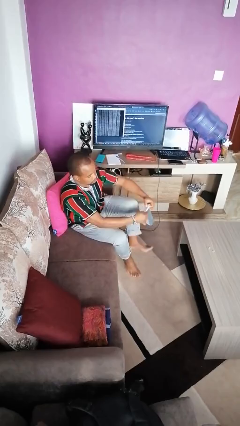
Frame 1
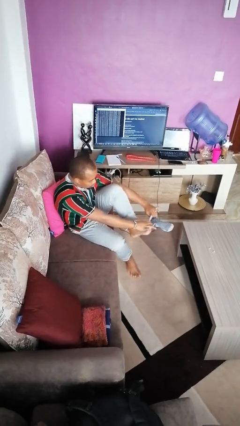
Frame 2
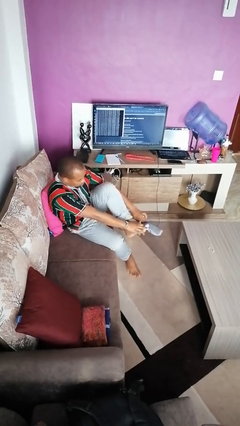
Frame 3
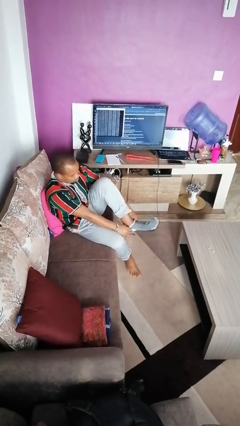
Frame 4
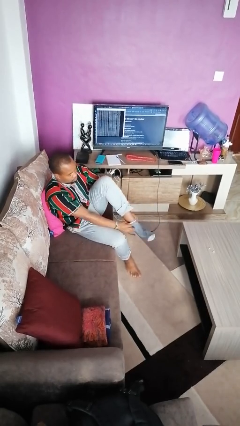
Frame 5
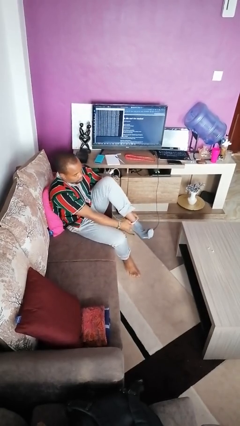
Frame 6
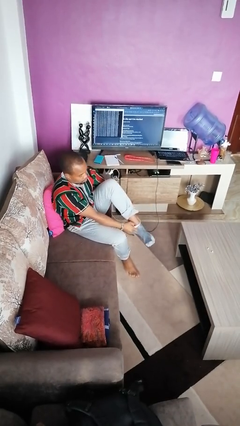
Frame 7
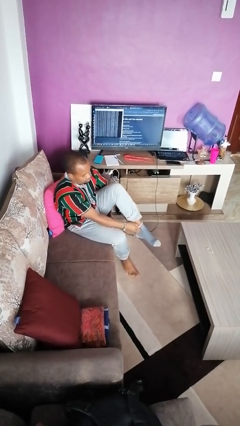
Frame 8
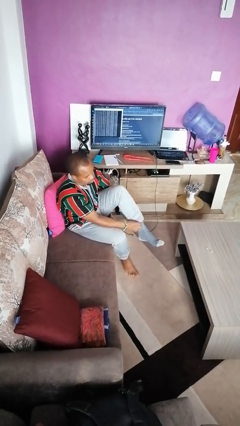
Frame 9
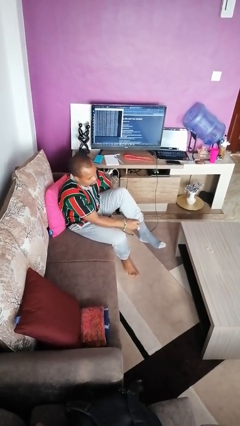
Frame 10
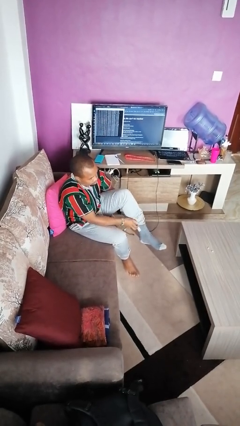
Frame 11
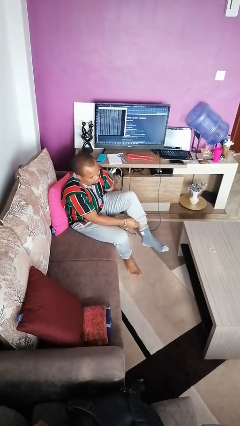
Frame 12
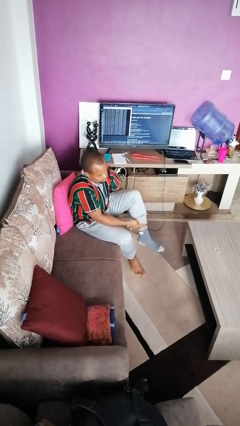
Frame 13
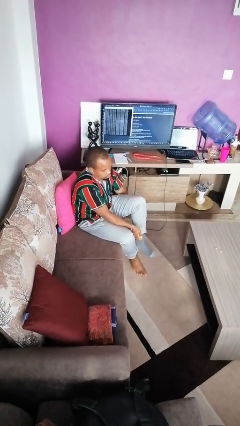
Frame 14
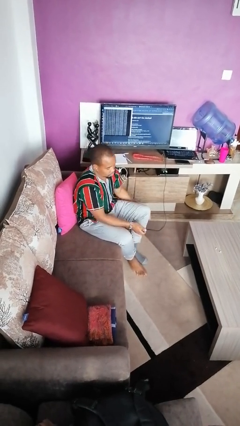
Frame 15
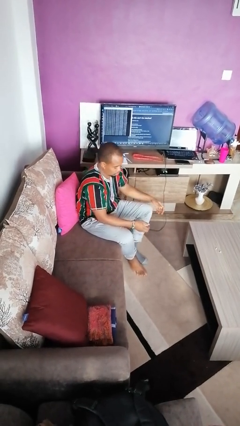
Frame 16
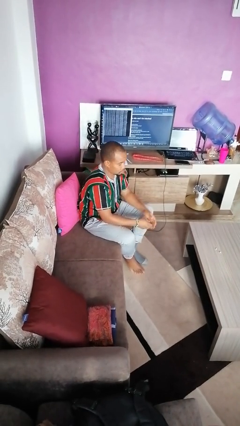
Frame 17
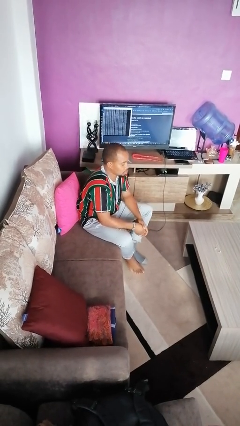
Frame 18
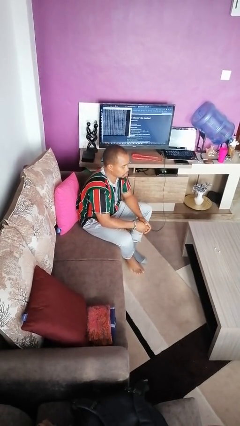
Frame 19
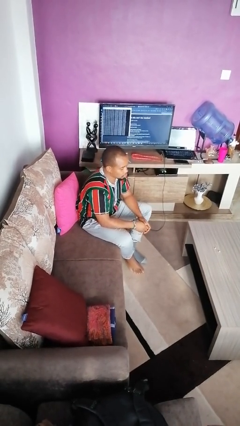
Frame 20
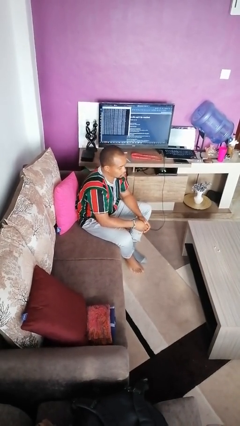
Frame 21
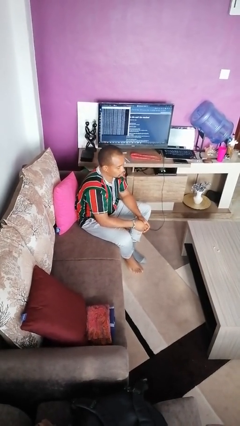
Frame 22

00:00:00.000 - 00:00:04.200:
person puts on socks

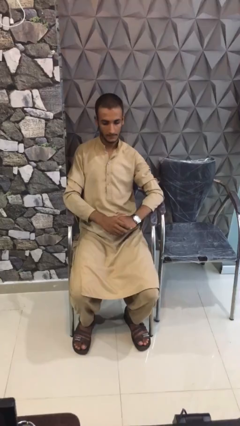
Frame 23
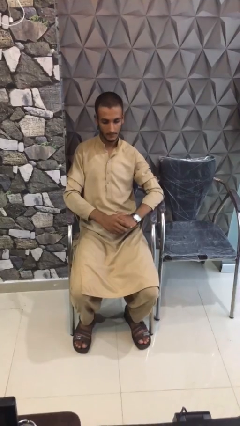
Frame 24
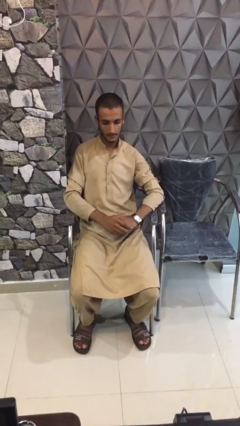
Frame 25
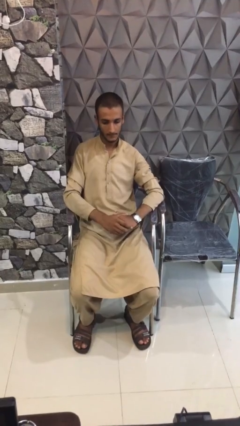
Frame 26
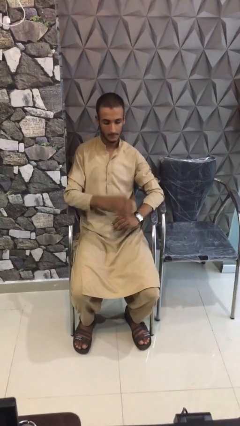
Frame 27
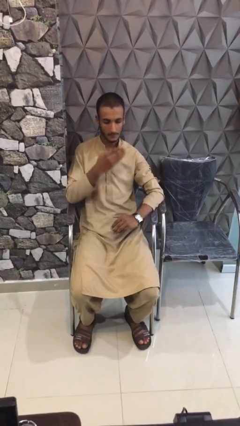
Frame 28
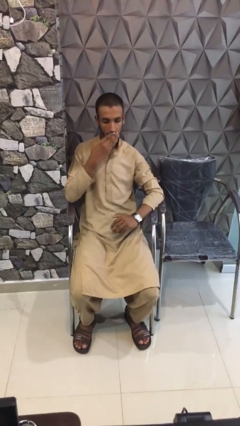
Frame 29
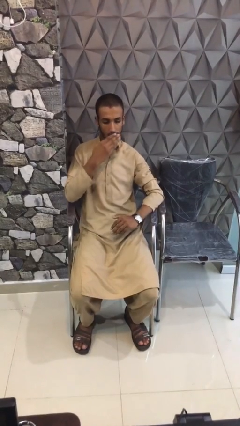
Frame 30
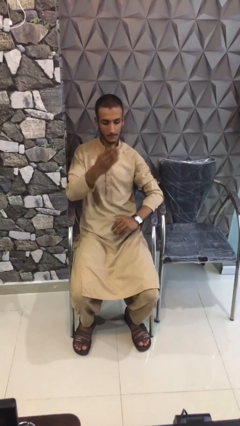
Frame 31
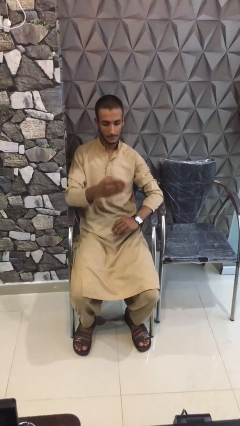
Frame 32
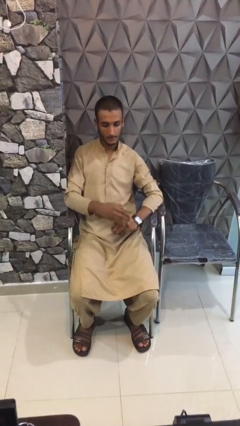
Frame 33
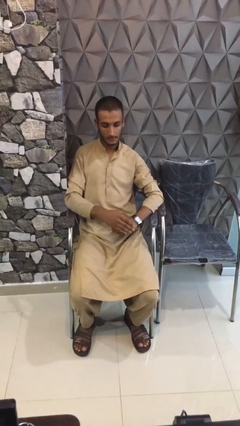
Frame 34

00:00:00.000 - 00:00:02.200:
person gestures blow kiss

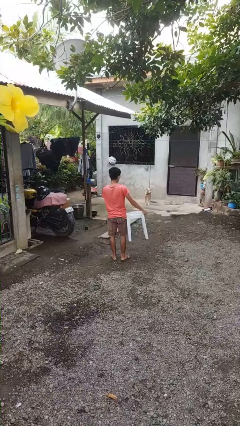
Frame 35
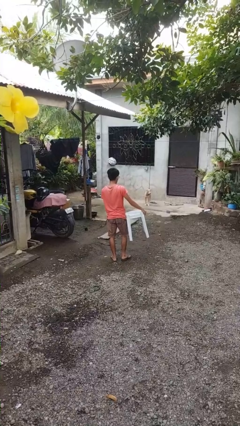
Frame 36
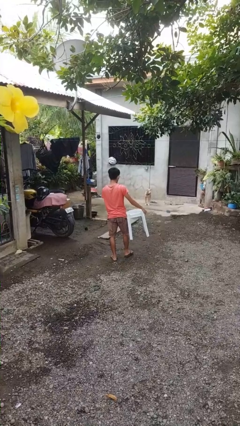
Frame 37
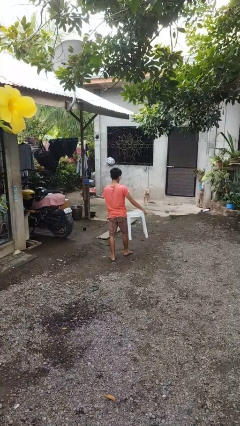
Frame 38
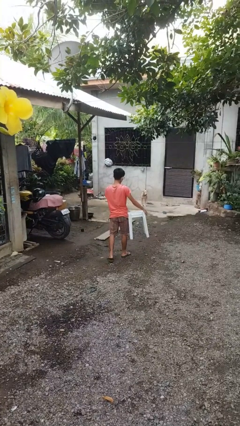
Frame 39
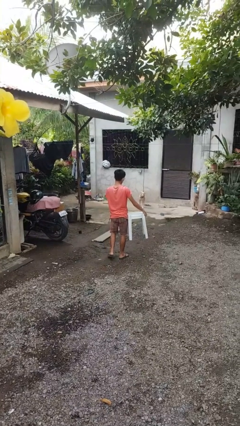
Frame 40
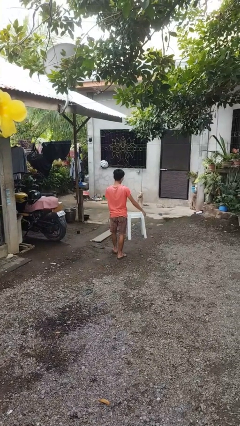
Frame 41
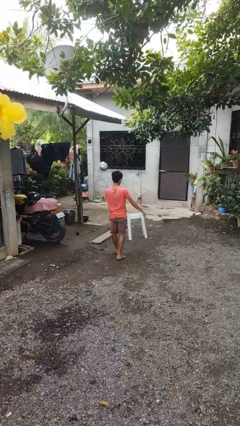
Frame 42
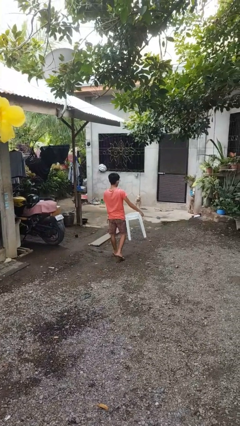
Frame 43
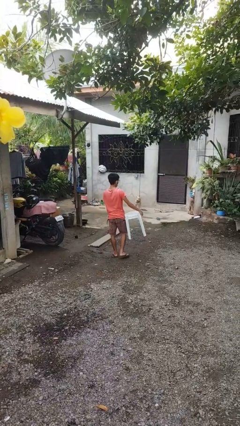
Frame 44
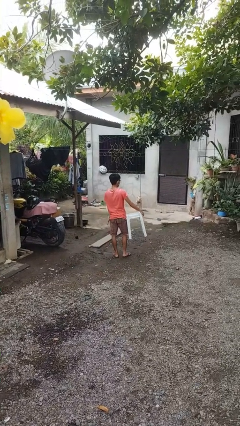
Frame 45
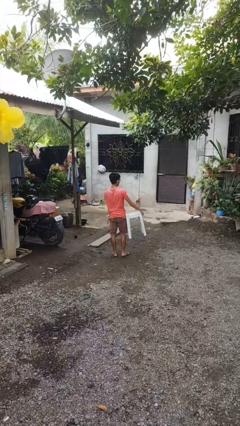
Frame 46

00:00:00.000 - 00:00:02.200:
person carries furniture

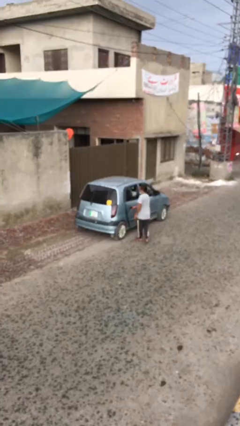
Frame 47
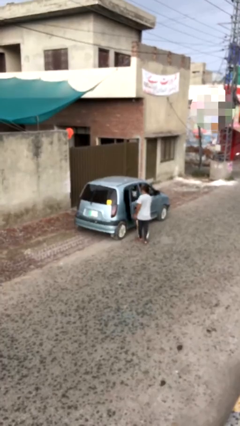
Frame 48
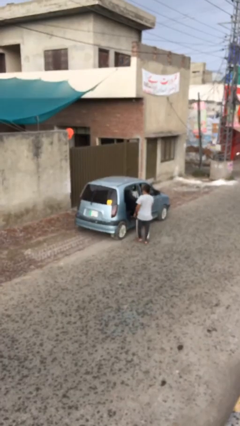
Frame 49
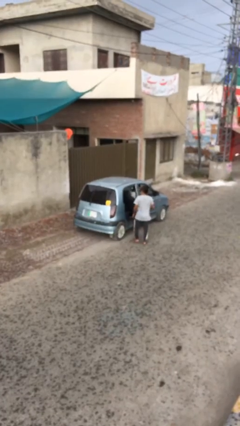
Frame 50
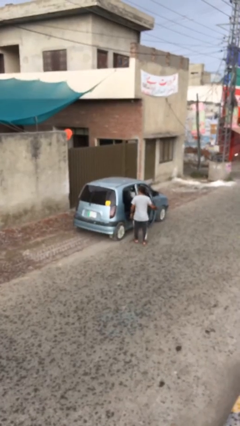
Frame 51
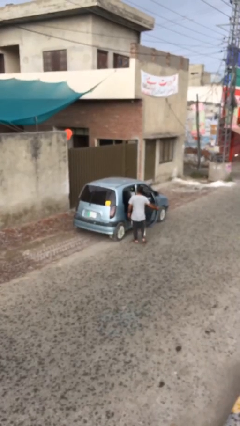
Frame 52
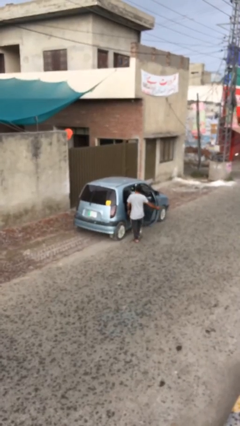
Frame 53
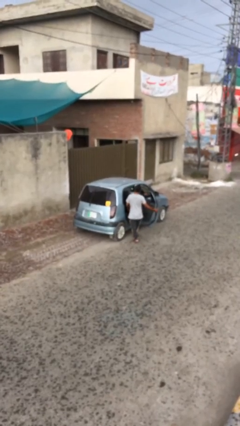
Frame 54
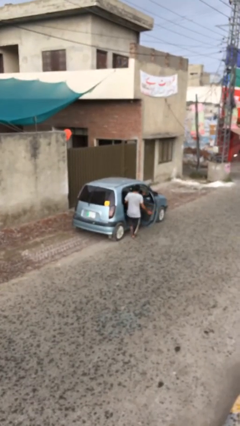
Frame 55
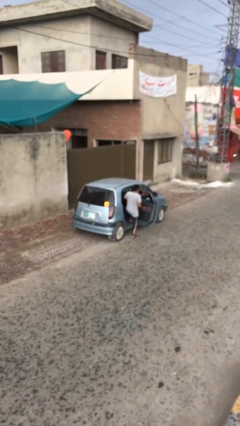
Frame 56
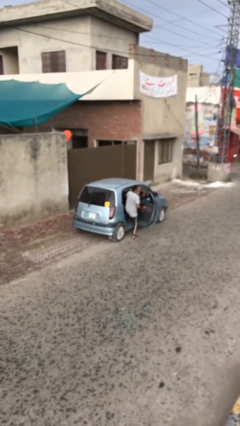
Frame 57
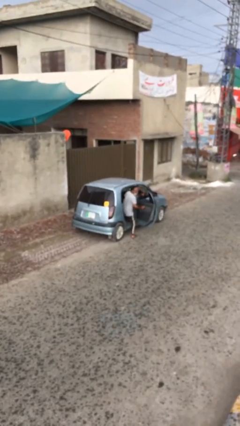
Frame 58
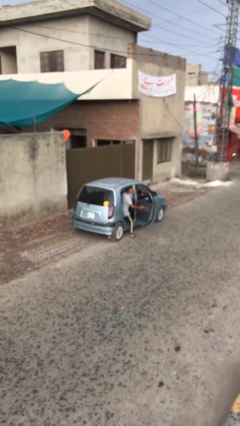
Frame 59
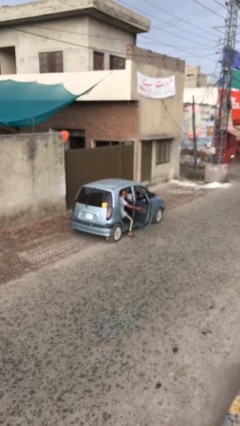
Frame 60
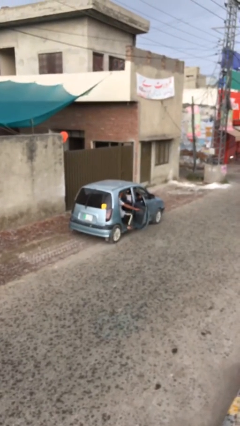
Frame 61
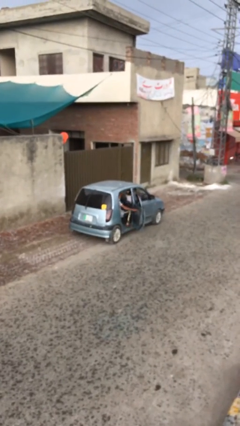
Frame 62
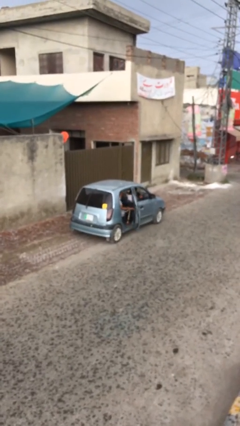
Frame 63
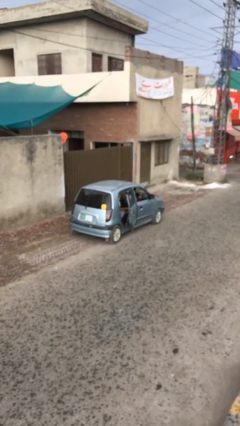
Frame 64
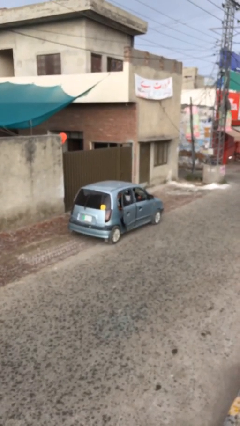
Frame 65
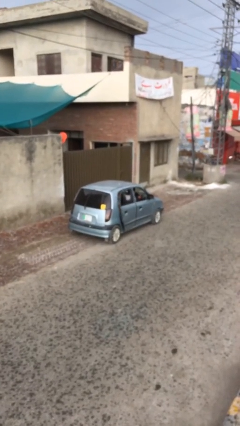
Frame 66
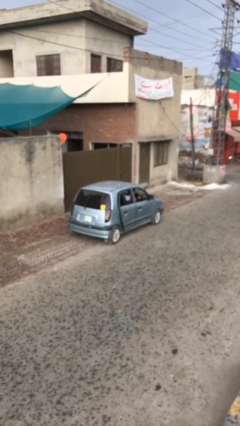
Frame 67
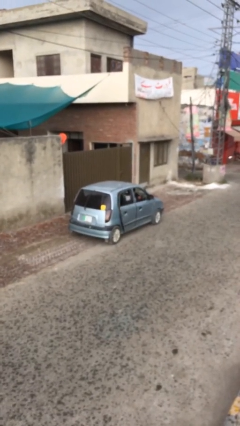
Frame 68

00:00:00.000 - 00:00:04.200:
car picks up person

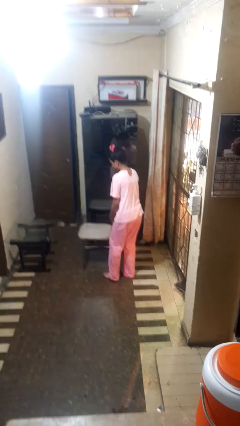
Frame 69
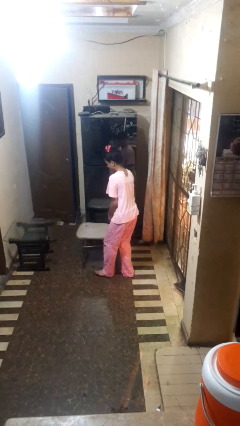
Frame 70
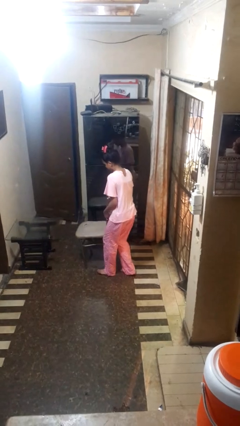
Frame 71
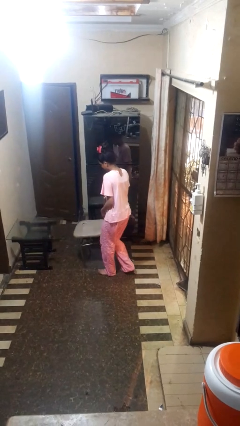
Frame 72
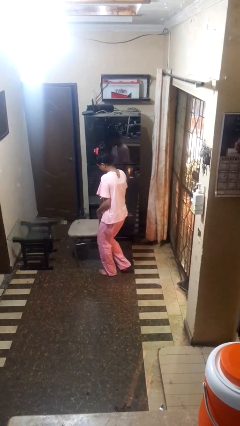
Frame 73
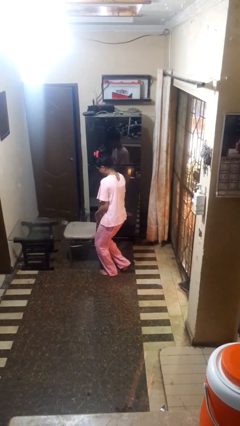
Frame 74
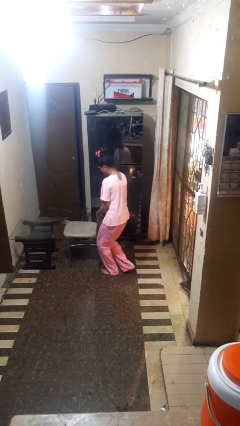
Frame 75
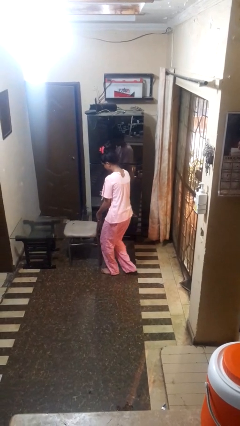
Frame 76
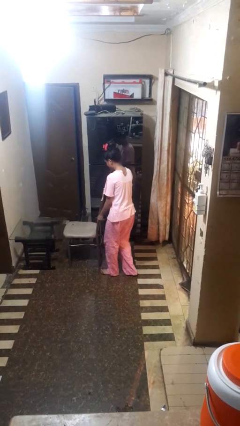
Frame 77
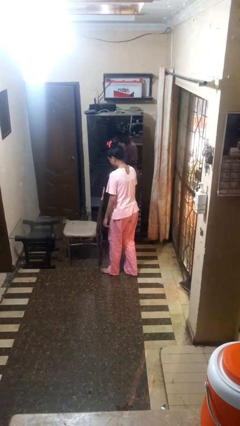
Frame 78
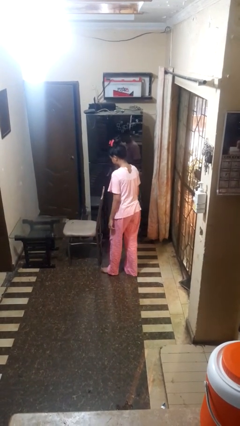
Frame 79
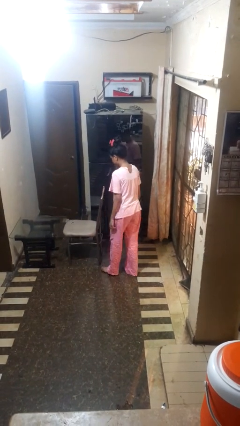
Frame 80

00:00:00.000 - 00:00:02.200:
person pushes in chair

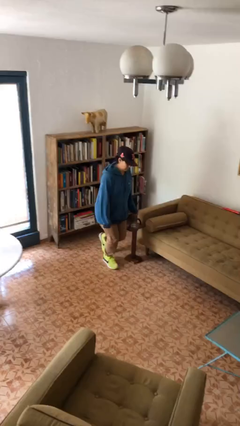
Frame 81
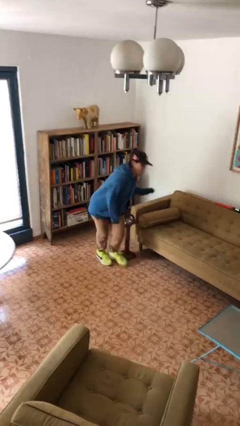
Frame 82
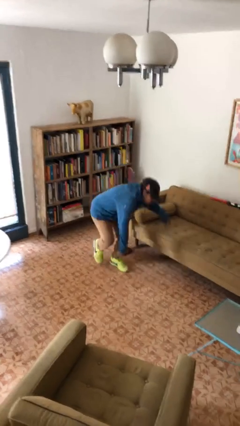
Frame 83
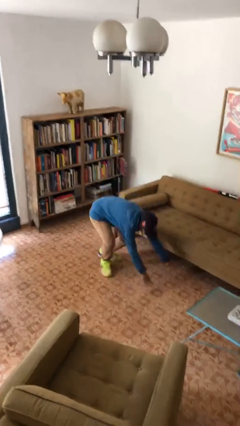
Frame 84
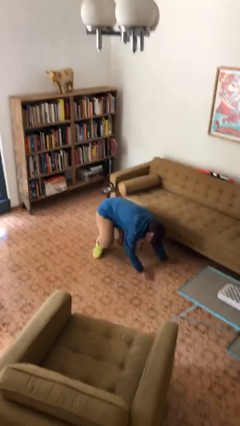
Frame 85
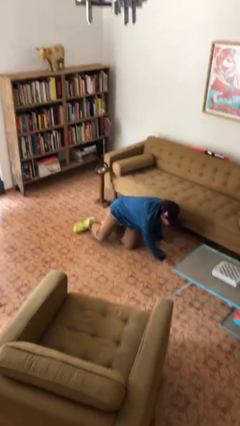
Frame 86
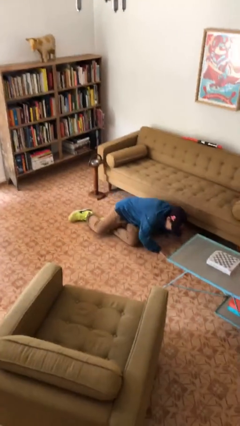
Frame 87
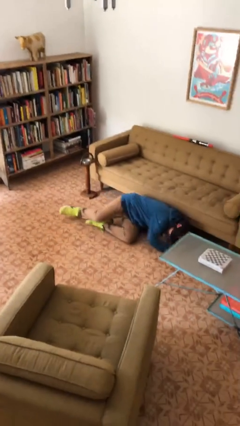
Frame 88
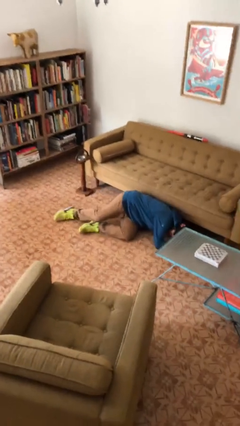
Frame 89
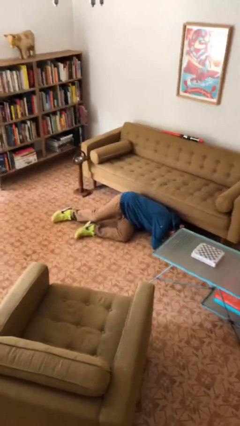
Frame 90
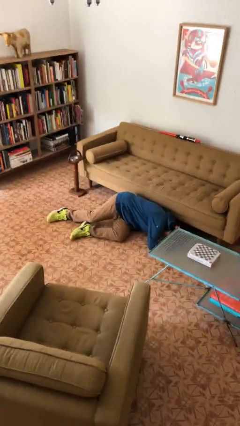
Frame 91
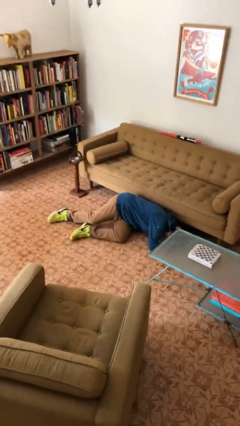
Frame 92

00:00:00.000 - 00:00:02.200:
person trips on object on floor
